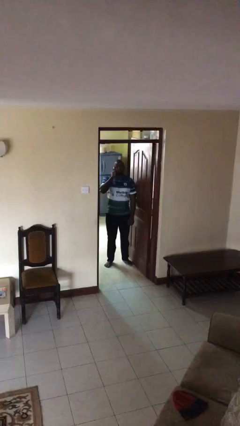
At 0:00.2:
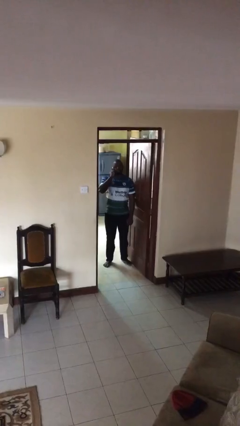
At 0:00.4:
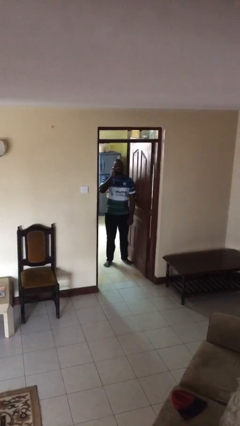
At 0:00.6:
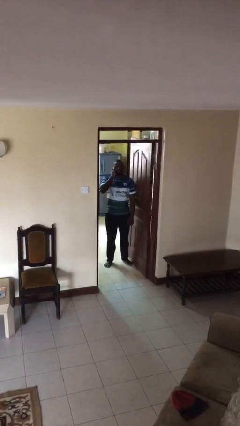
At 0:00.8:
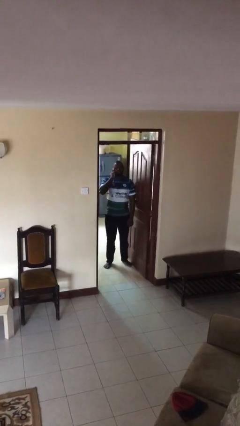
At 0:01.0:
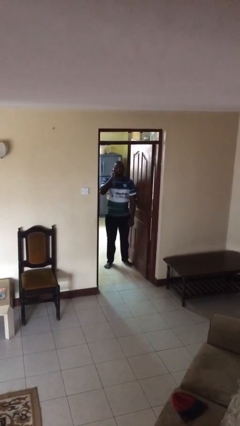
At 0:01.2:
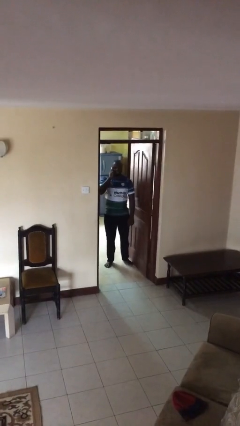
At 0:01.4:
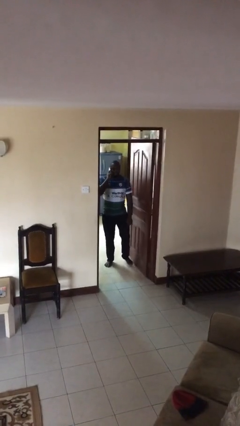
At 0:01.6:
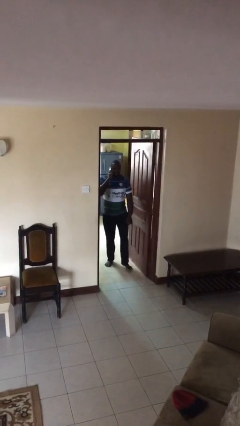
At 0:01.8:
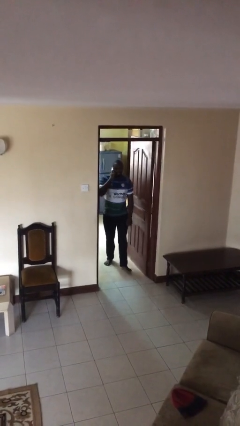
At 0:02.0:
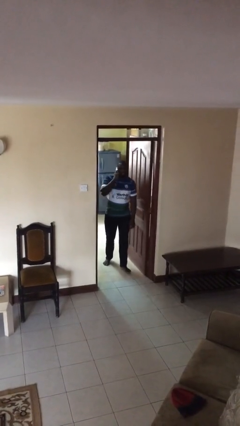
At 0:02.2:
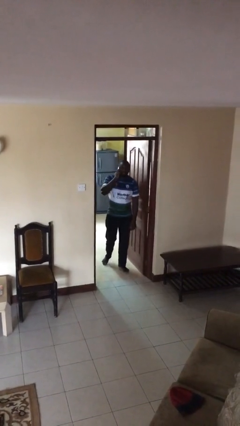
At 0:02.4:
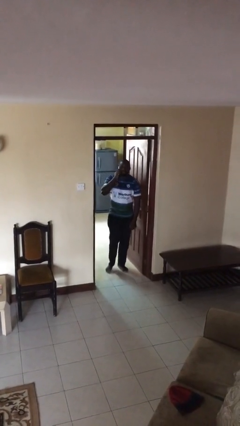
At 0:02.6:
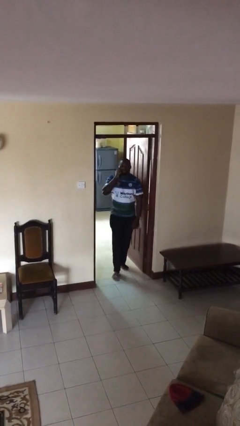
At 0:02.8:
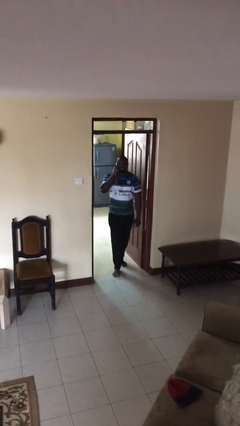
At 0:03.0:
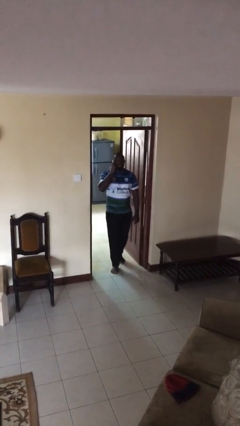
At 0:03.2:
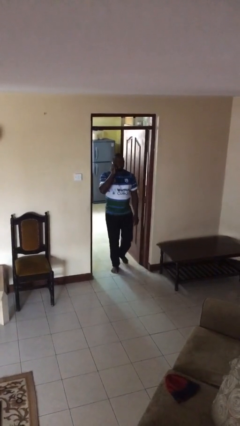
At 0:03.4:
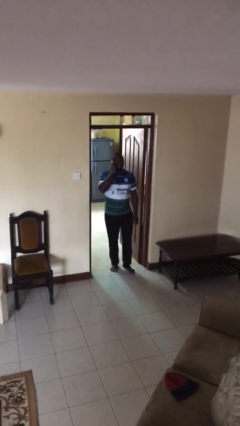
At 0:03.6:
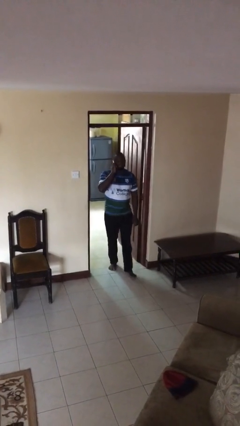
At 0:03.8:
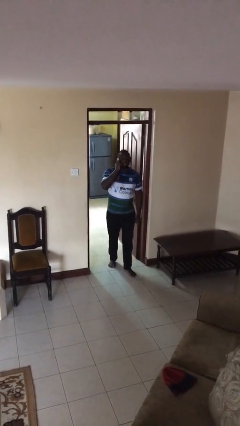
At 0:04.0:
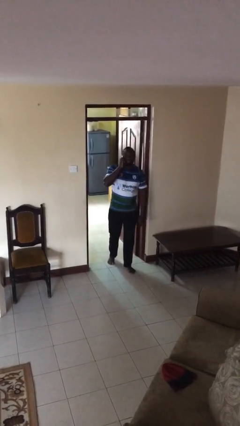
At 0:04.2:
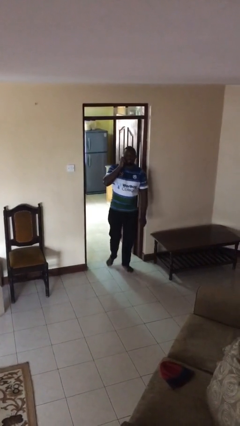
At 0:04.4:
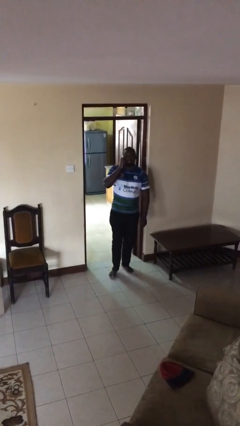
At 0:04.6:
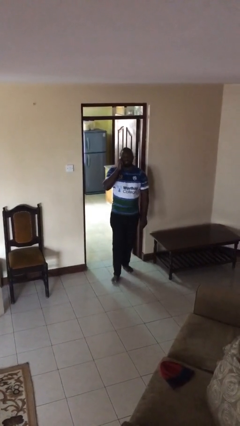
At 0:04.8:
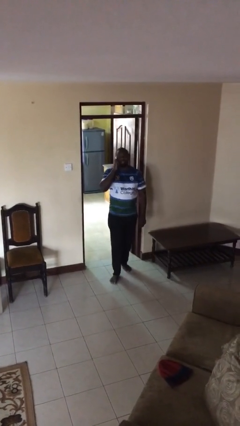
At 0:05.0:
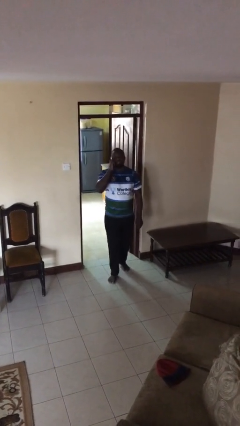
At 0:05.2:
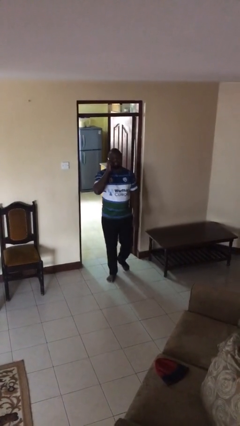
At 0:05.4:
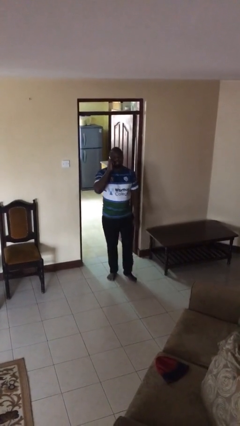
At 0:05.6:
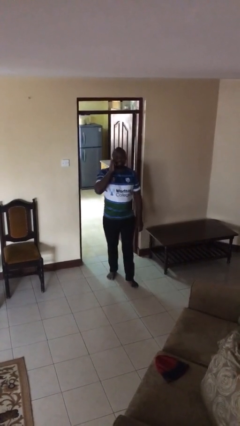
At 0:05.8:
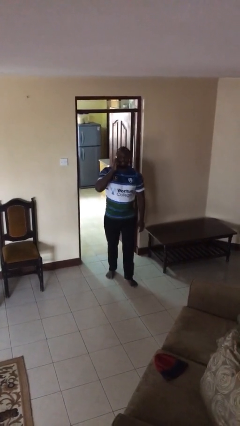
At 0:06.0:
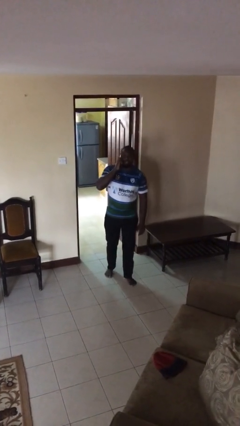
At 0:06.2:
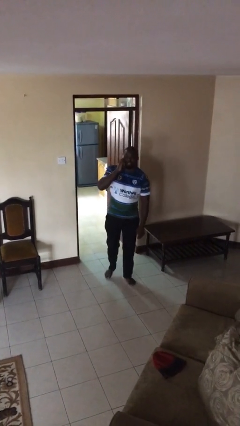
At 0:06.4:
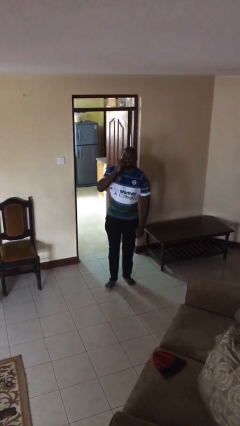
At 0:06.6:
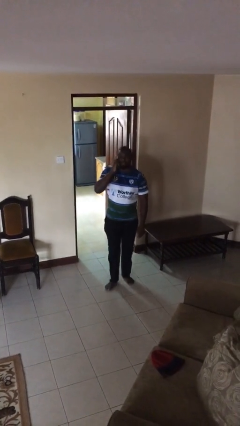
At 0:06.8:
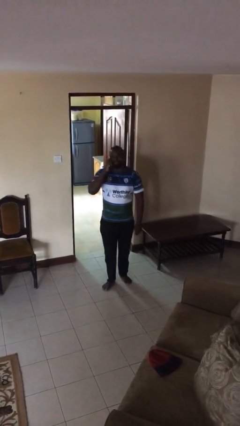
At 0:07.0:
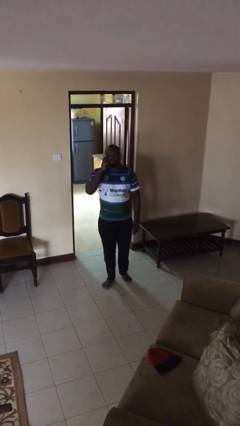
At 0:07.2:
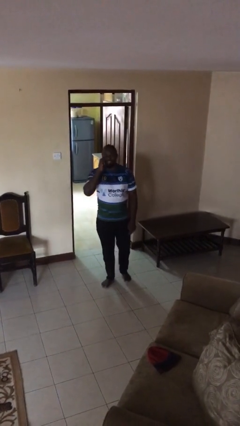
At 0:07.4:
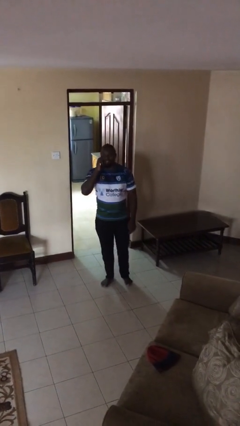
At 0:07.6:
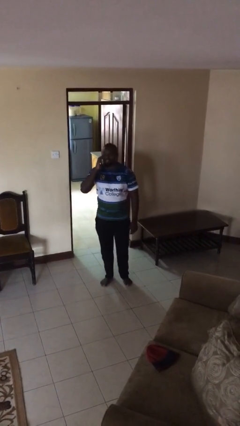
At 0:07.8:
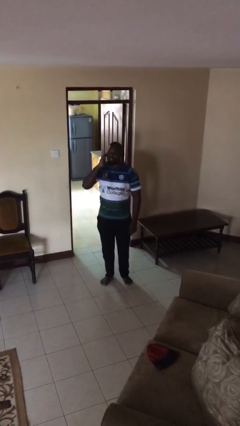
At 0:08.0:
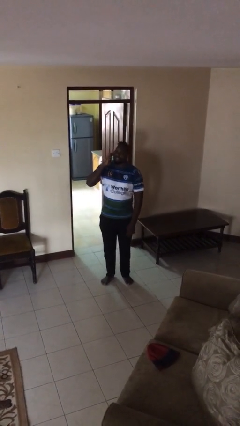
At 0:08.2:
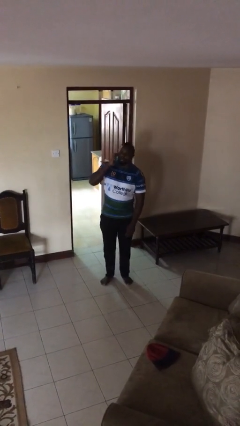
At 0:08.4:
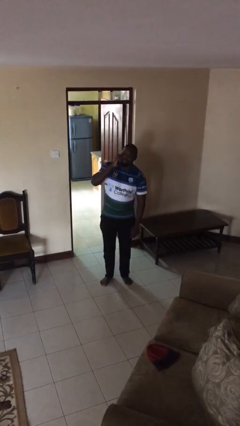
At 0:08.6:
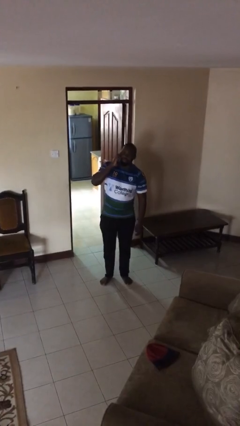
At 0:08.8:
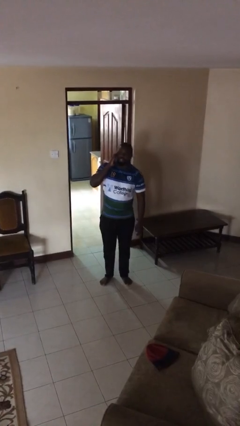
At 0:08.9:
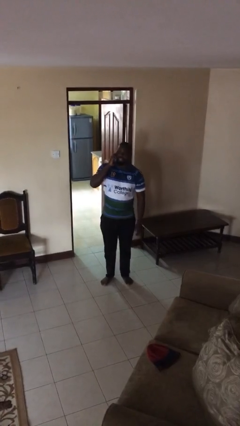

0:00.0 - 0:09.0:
person enters scene through structure

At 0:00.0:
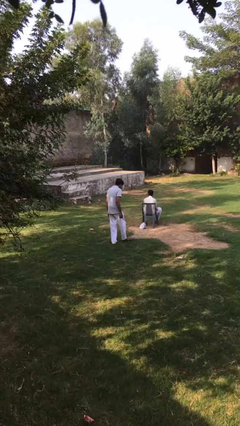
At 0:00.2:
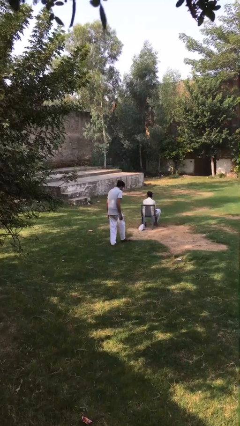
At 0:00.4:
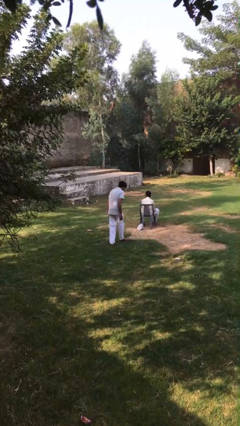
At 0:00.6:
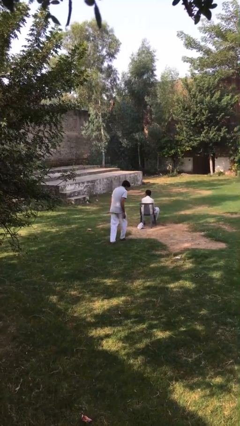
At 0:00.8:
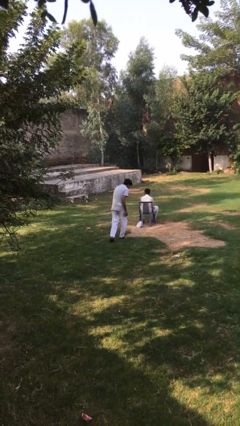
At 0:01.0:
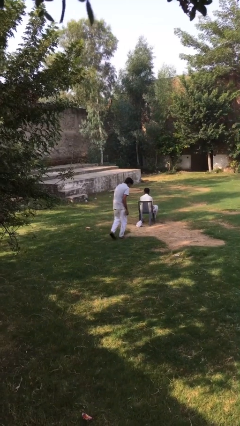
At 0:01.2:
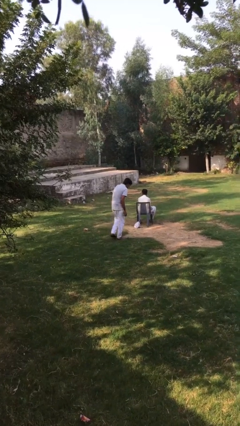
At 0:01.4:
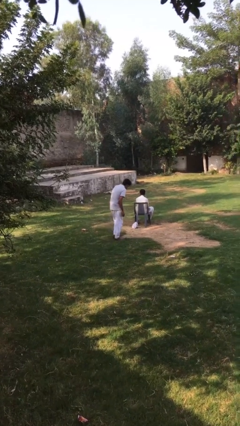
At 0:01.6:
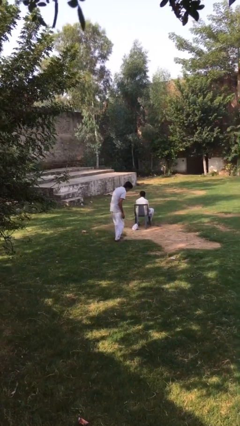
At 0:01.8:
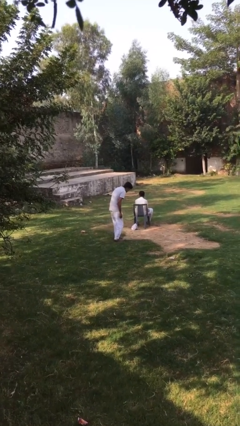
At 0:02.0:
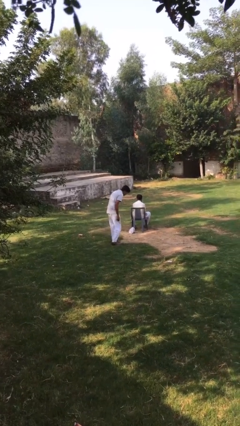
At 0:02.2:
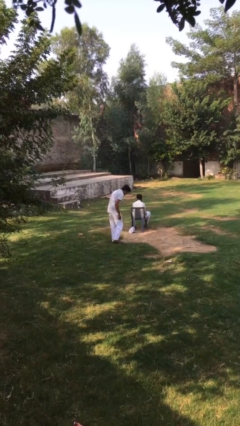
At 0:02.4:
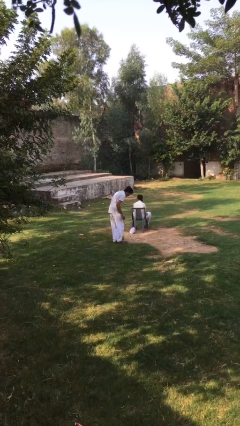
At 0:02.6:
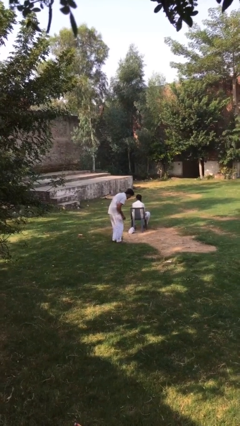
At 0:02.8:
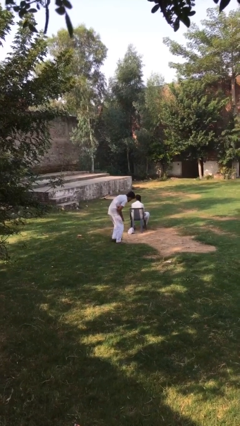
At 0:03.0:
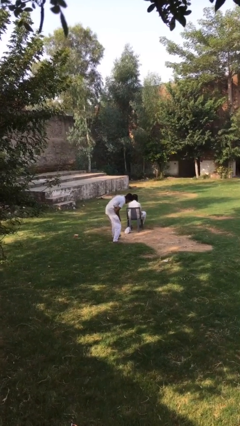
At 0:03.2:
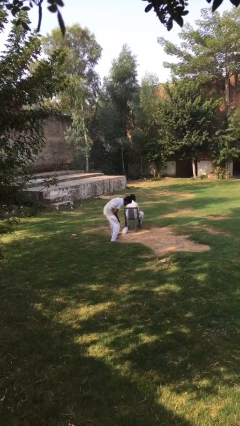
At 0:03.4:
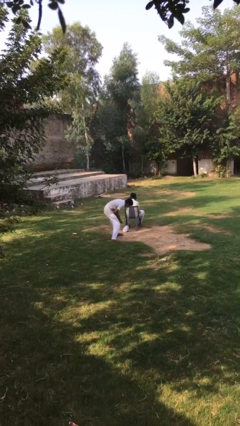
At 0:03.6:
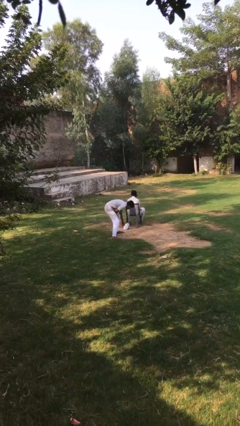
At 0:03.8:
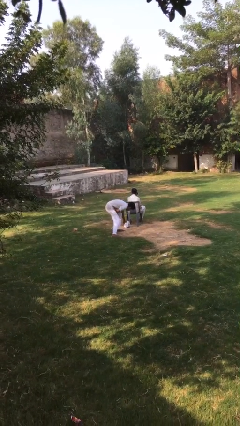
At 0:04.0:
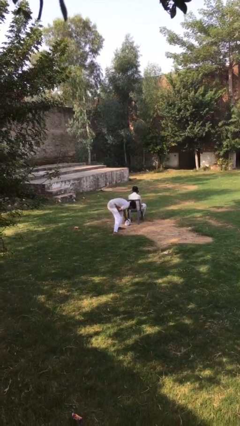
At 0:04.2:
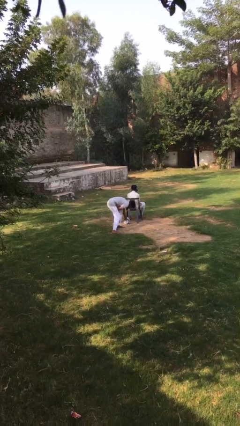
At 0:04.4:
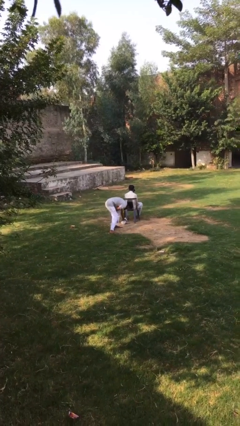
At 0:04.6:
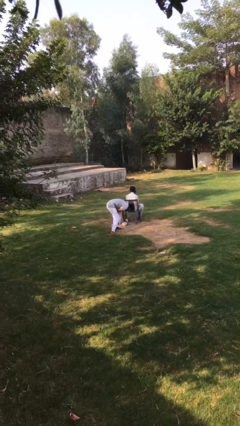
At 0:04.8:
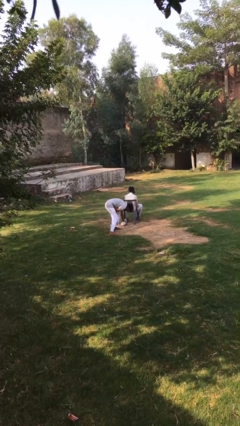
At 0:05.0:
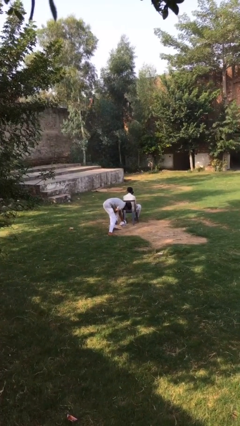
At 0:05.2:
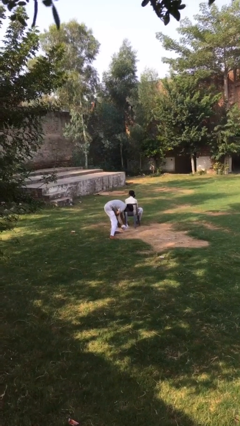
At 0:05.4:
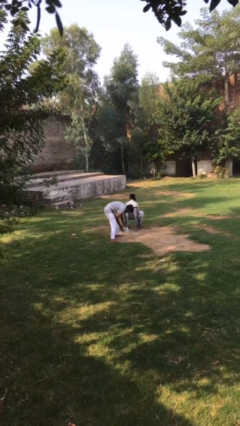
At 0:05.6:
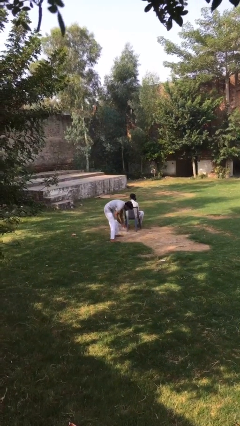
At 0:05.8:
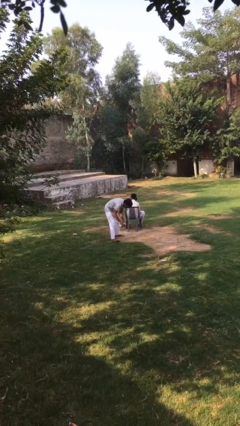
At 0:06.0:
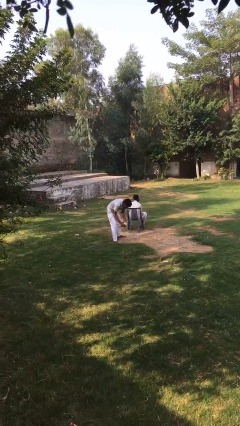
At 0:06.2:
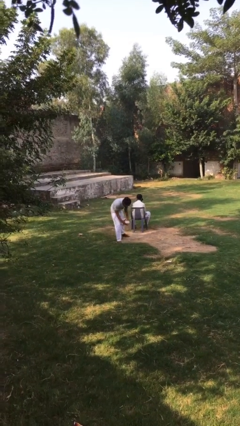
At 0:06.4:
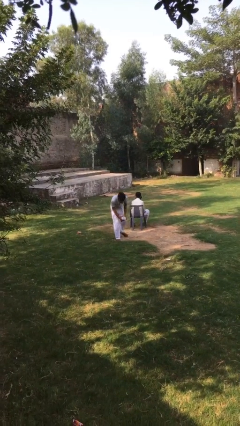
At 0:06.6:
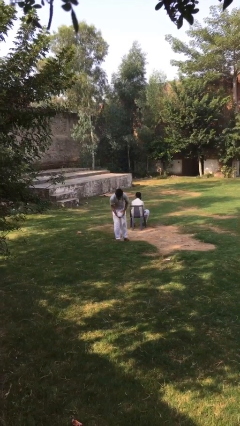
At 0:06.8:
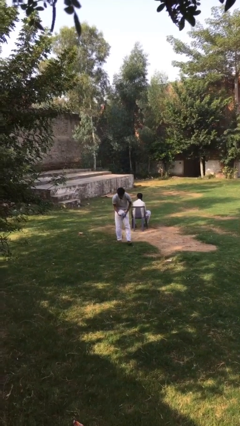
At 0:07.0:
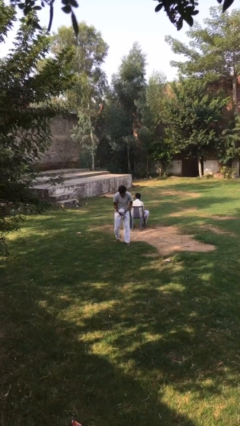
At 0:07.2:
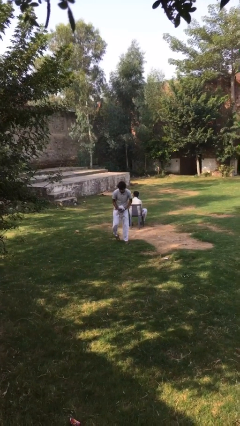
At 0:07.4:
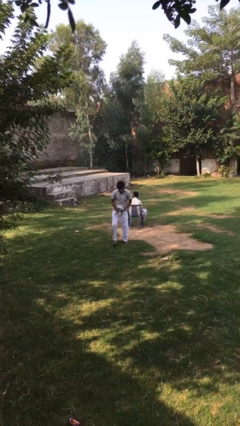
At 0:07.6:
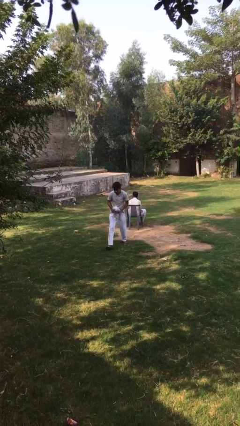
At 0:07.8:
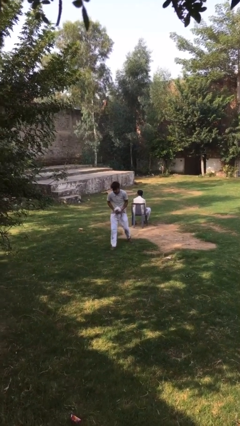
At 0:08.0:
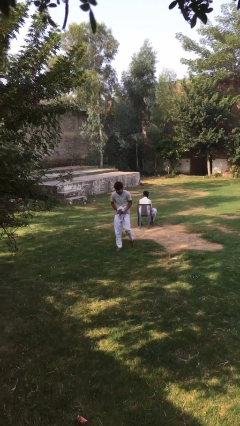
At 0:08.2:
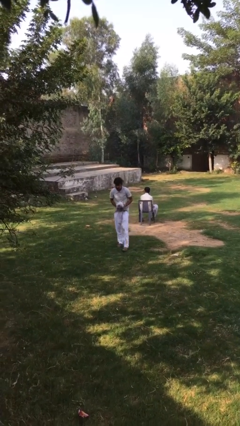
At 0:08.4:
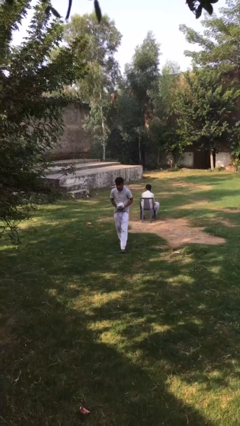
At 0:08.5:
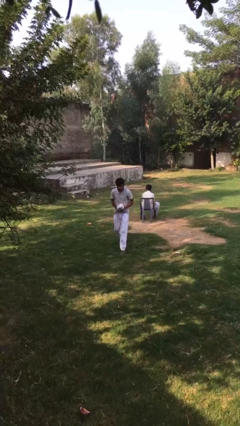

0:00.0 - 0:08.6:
person steals object from person

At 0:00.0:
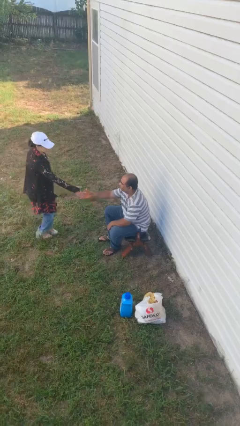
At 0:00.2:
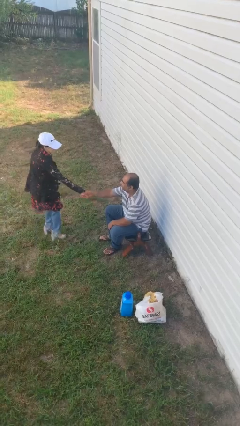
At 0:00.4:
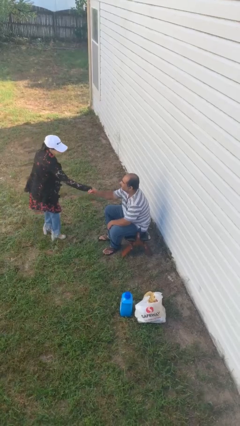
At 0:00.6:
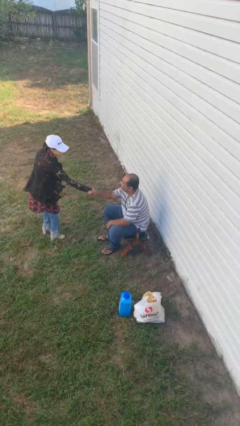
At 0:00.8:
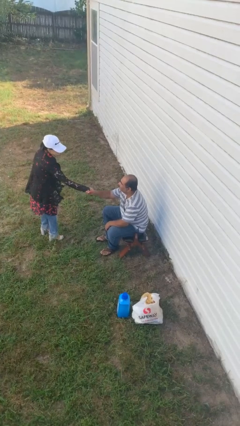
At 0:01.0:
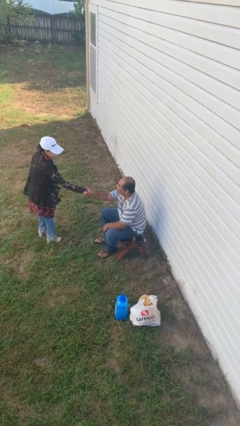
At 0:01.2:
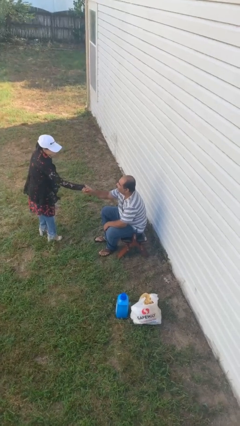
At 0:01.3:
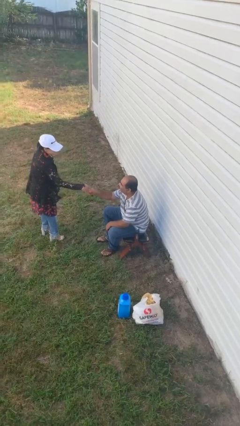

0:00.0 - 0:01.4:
person shakes hand
